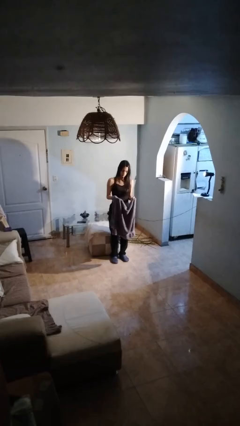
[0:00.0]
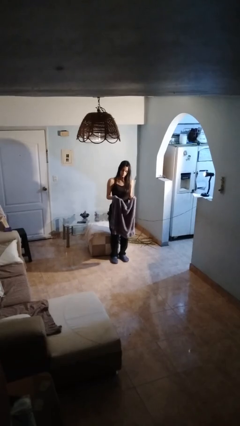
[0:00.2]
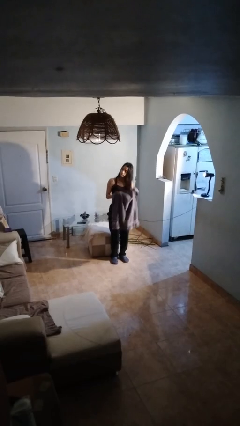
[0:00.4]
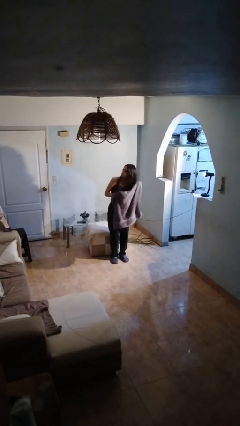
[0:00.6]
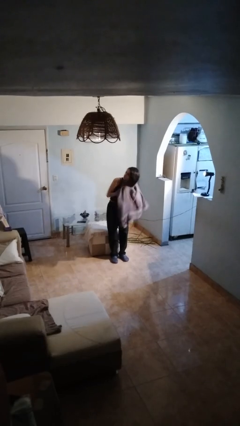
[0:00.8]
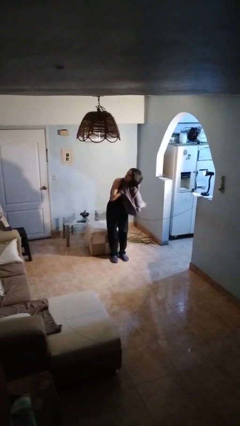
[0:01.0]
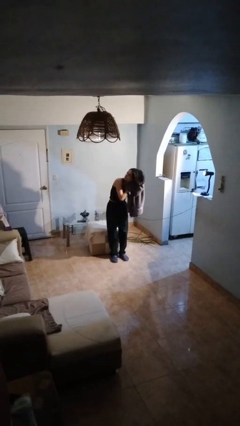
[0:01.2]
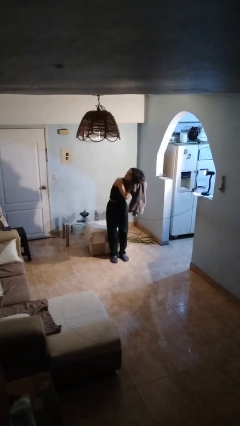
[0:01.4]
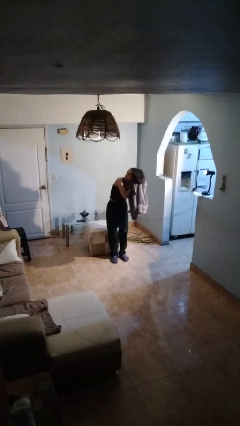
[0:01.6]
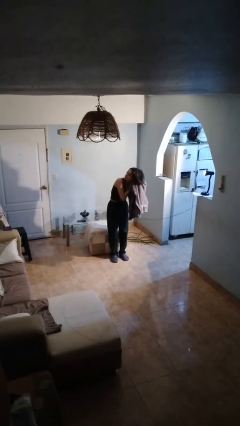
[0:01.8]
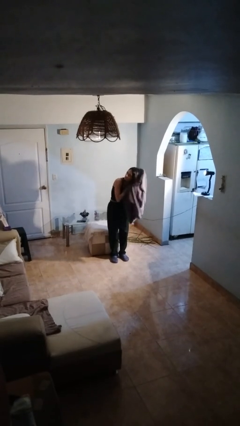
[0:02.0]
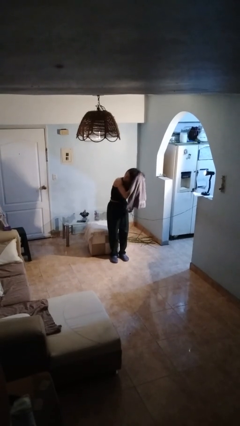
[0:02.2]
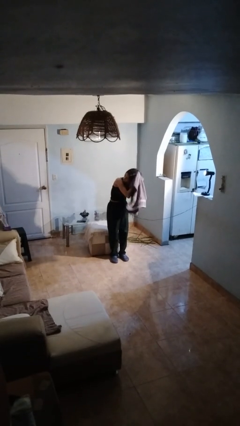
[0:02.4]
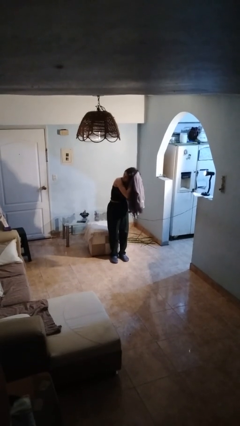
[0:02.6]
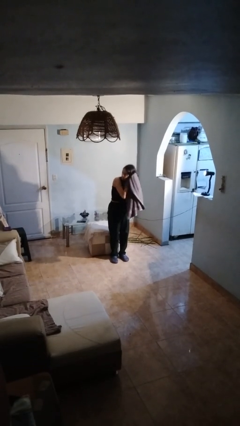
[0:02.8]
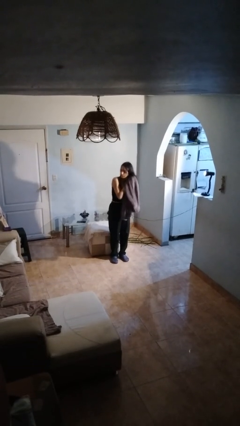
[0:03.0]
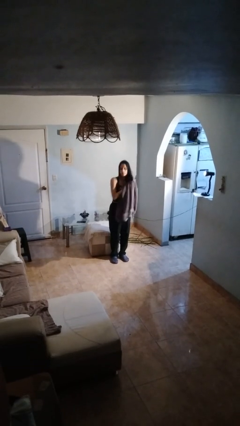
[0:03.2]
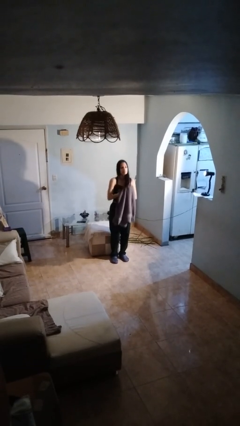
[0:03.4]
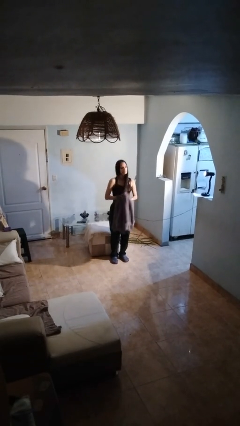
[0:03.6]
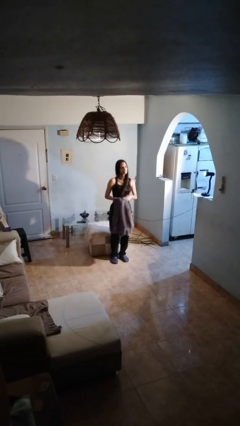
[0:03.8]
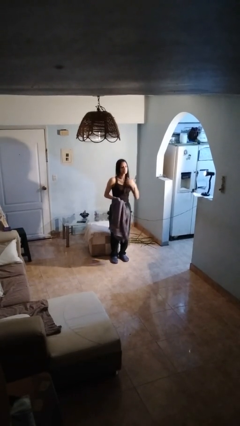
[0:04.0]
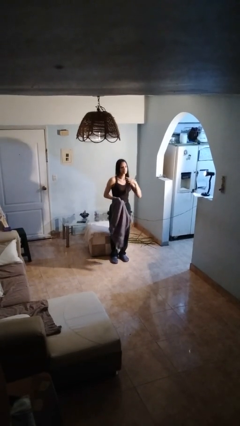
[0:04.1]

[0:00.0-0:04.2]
person dries hair with towel

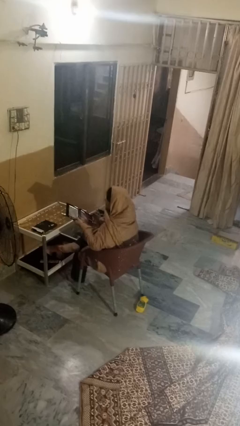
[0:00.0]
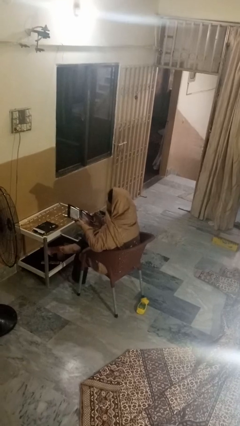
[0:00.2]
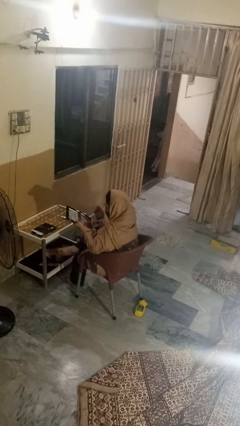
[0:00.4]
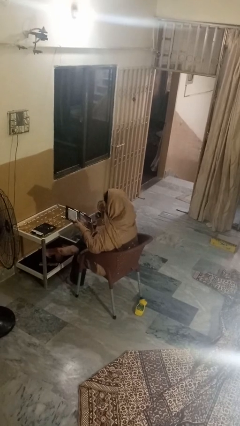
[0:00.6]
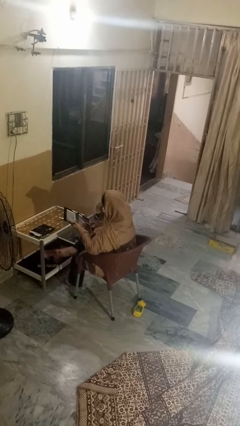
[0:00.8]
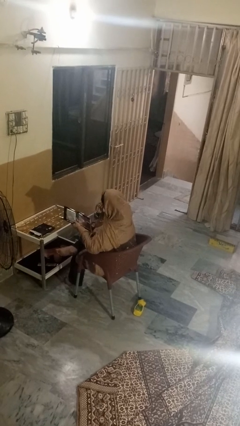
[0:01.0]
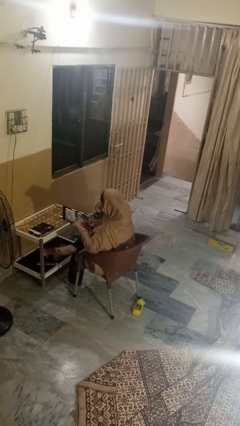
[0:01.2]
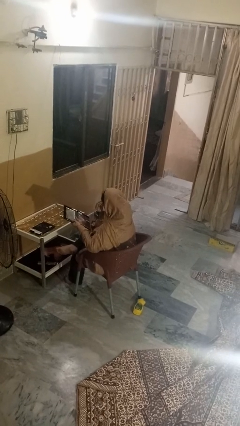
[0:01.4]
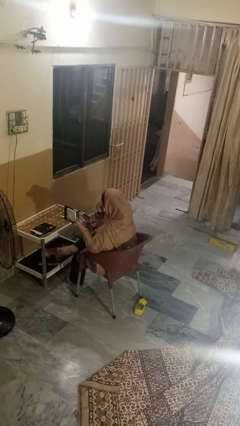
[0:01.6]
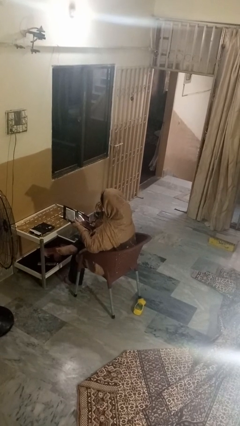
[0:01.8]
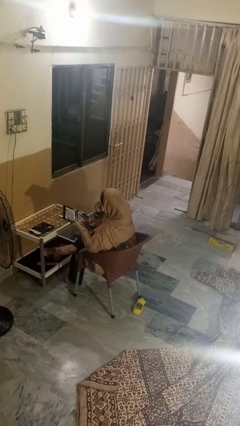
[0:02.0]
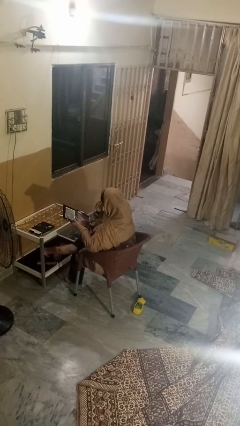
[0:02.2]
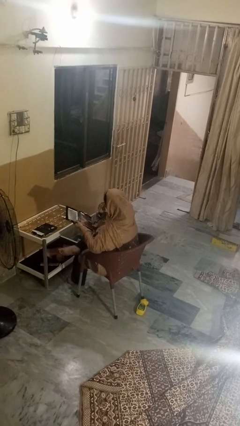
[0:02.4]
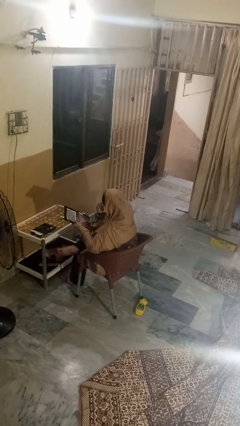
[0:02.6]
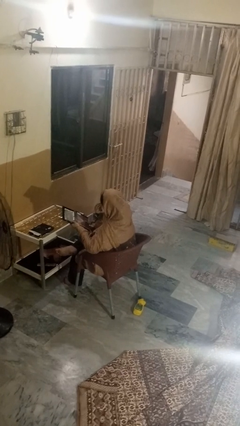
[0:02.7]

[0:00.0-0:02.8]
person applies eye makeup

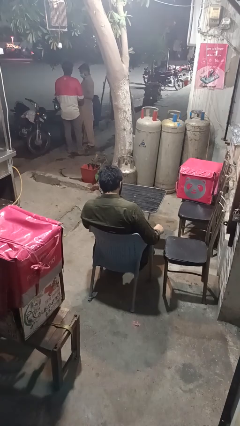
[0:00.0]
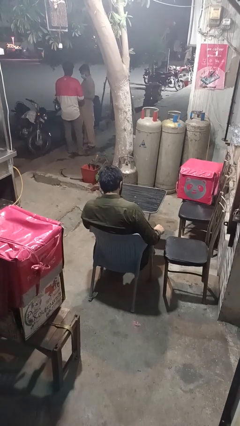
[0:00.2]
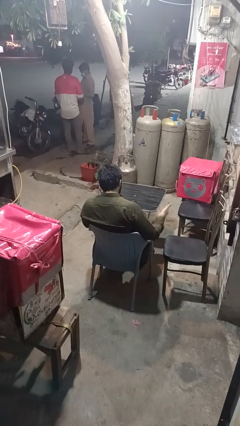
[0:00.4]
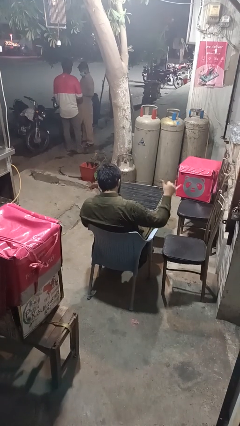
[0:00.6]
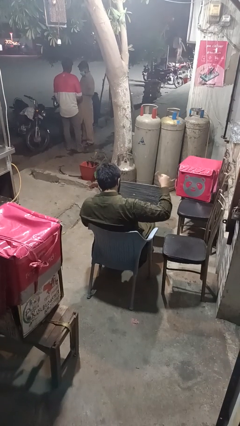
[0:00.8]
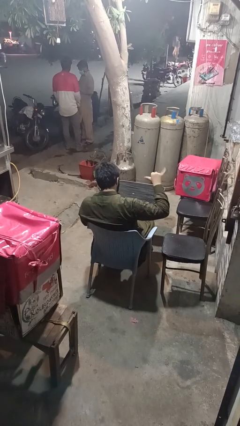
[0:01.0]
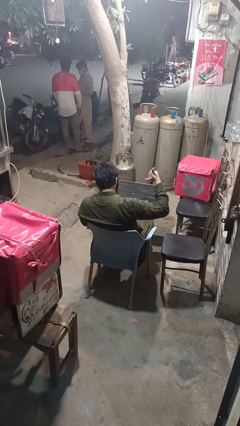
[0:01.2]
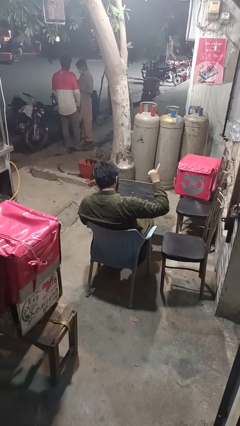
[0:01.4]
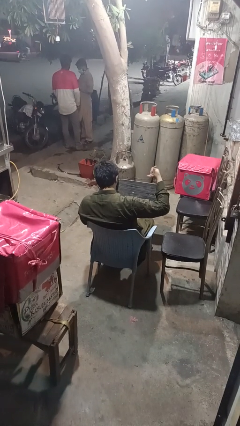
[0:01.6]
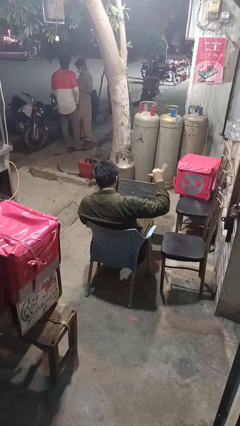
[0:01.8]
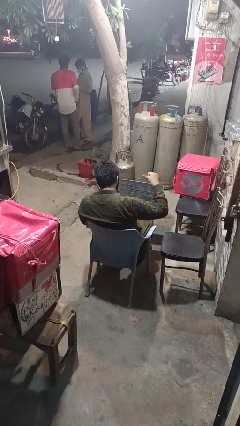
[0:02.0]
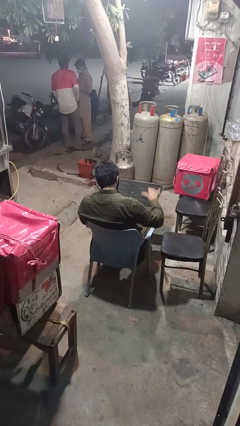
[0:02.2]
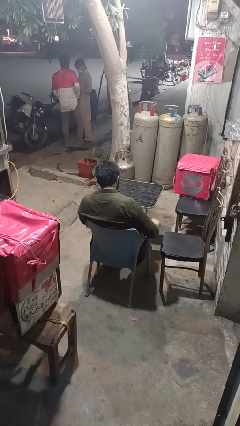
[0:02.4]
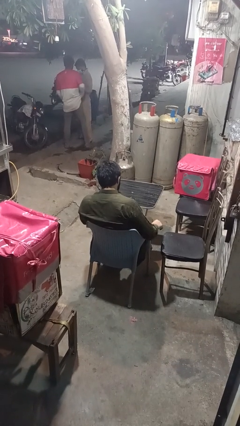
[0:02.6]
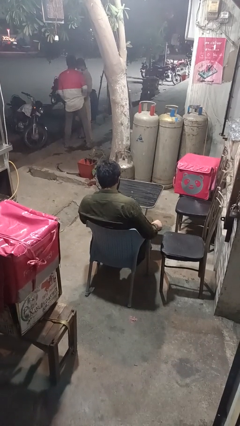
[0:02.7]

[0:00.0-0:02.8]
person gestures hang loose

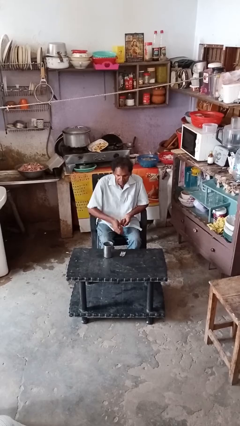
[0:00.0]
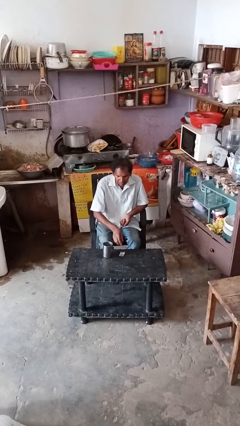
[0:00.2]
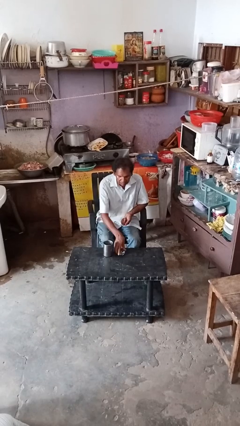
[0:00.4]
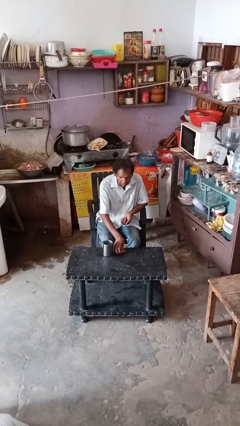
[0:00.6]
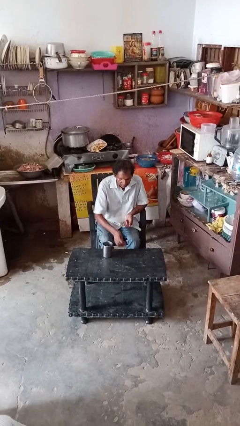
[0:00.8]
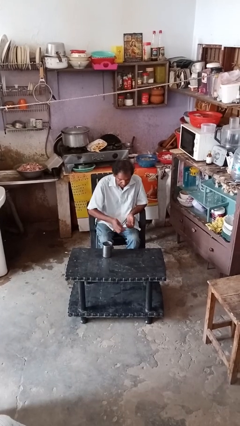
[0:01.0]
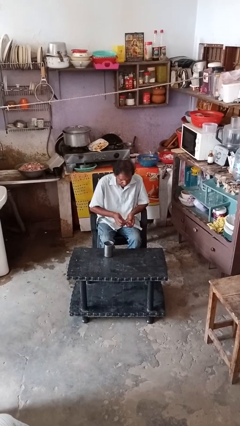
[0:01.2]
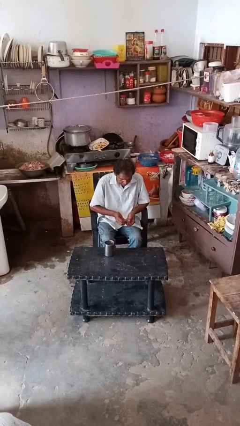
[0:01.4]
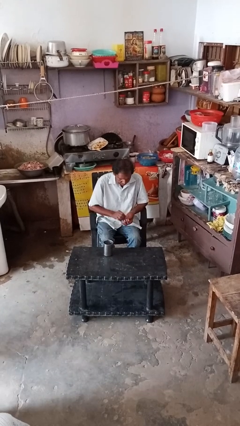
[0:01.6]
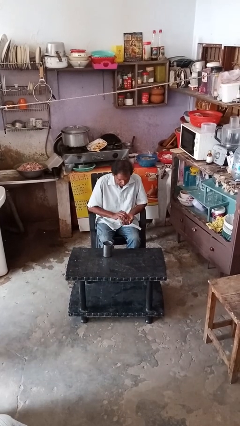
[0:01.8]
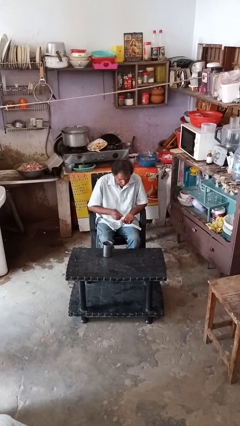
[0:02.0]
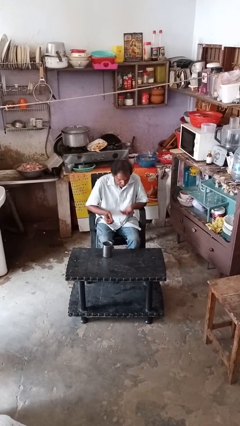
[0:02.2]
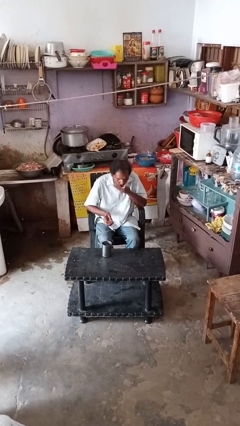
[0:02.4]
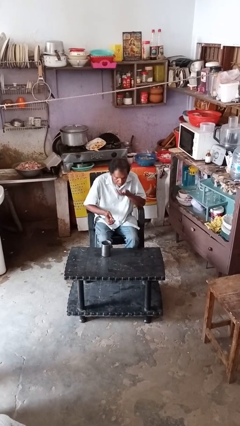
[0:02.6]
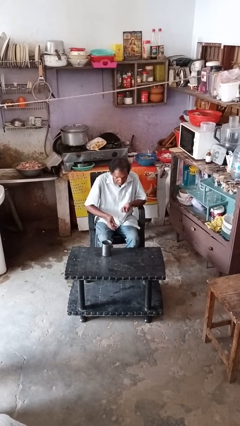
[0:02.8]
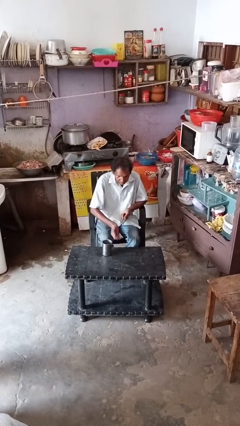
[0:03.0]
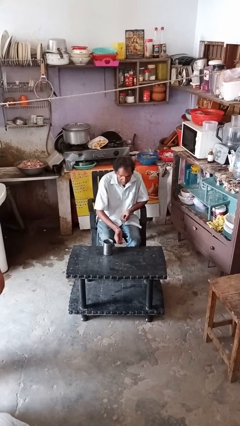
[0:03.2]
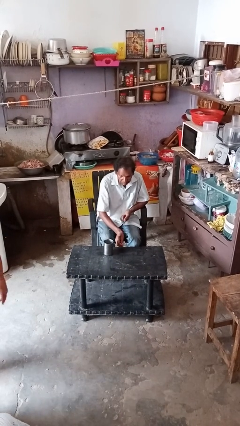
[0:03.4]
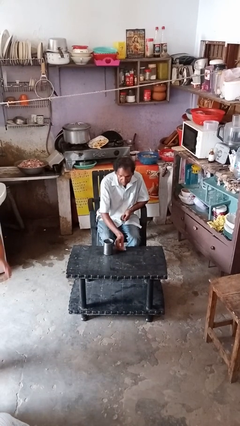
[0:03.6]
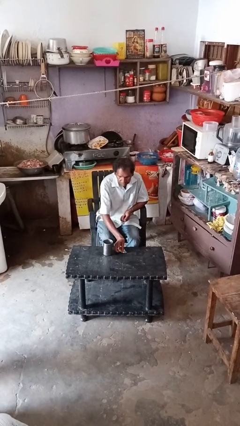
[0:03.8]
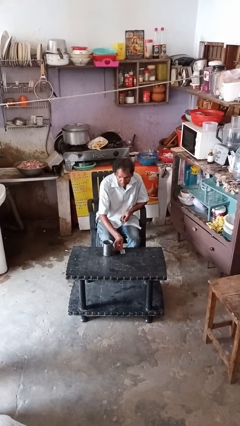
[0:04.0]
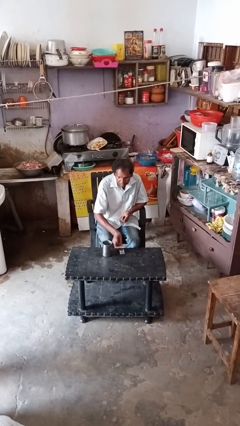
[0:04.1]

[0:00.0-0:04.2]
person takes medicine pills

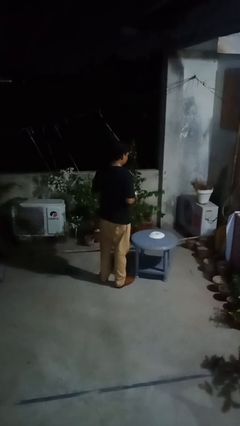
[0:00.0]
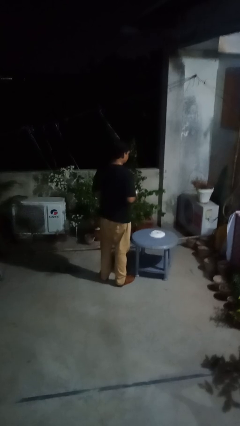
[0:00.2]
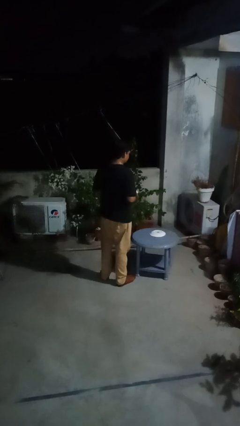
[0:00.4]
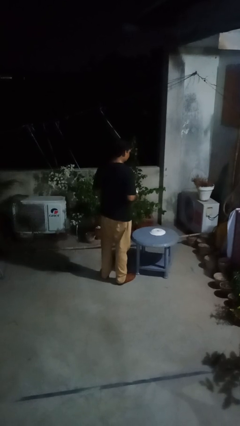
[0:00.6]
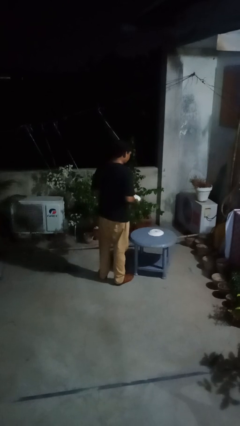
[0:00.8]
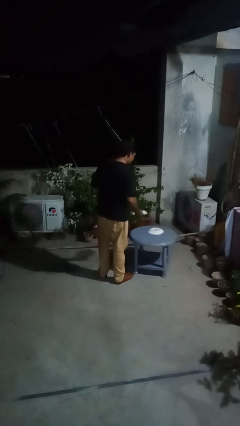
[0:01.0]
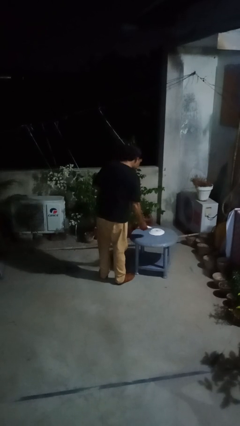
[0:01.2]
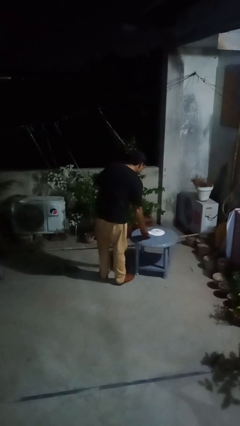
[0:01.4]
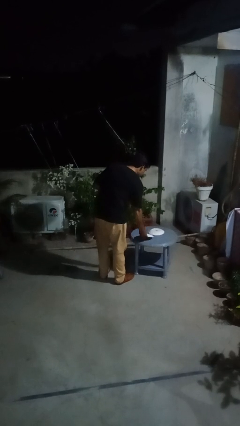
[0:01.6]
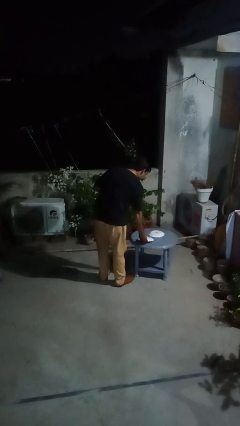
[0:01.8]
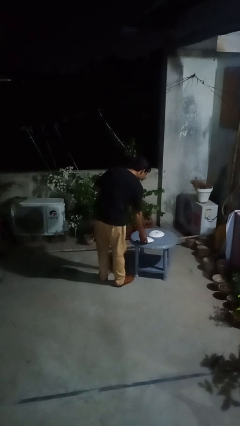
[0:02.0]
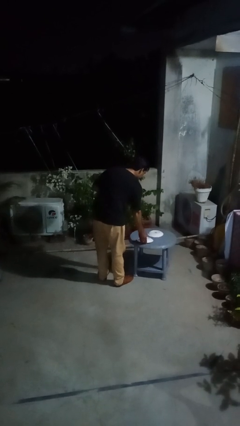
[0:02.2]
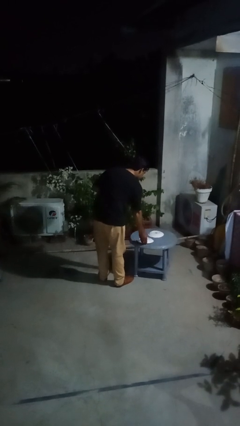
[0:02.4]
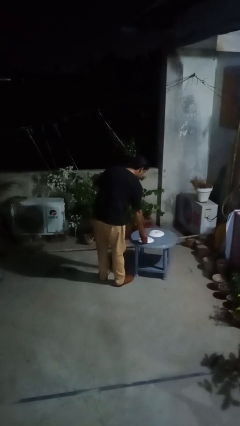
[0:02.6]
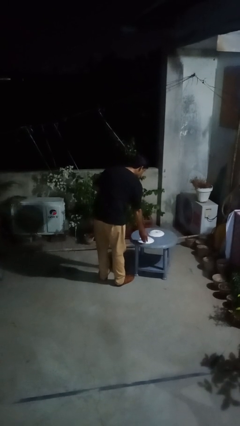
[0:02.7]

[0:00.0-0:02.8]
person sets table

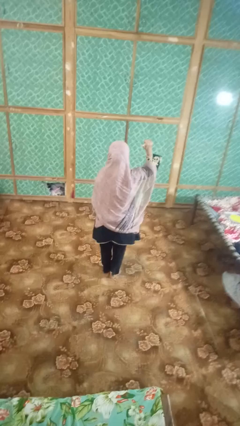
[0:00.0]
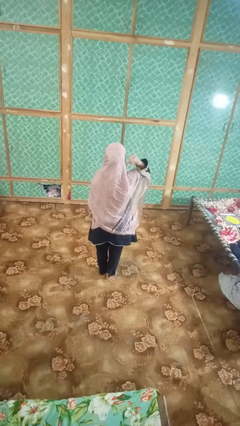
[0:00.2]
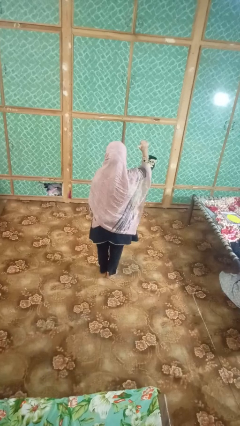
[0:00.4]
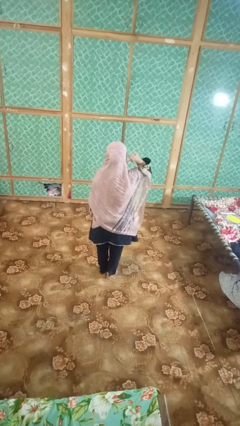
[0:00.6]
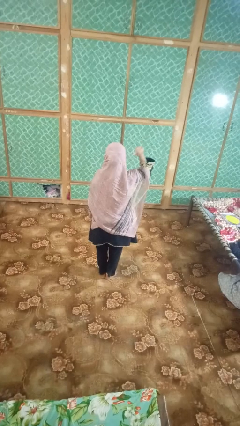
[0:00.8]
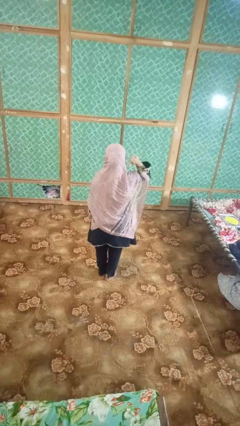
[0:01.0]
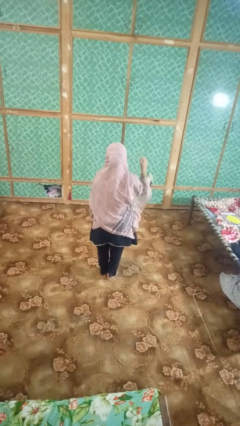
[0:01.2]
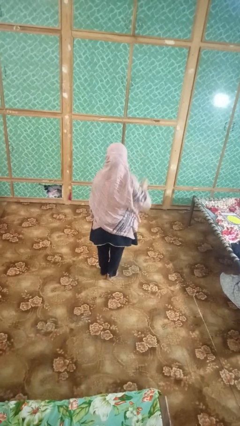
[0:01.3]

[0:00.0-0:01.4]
person gestures behind me
